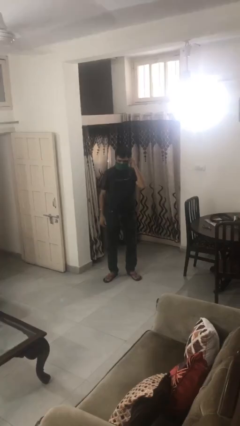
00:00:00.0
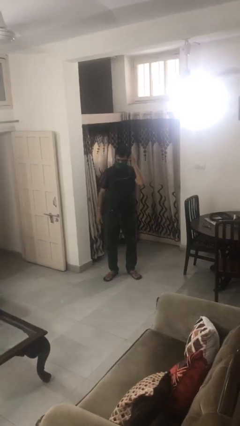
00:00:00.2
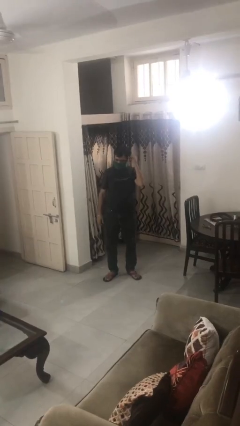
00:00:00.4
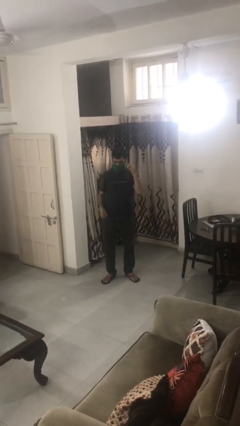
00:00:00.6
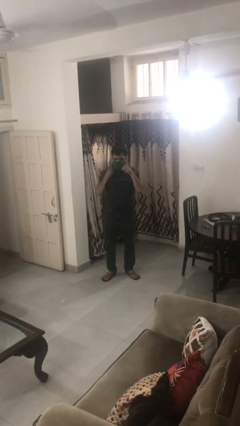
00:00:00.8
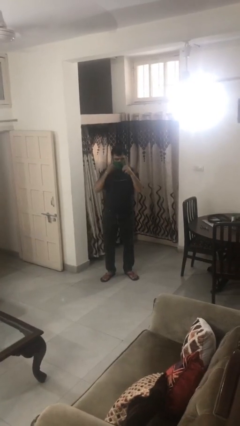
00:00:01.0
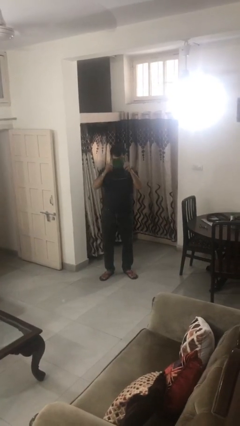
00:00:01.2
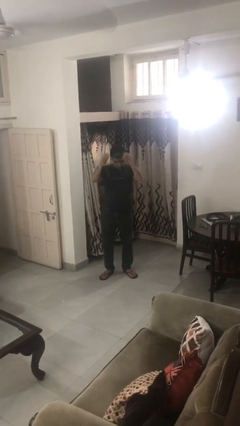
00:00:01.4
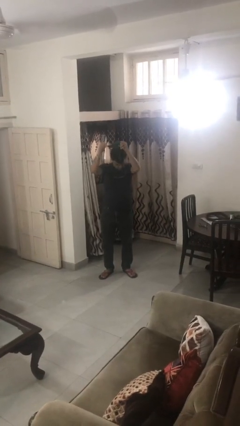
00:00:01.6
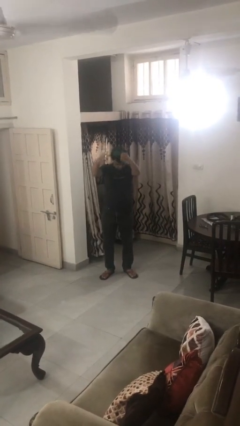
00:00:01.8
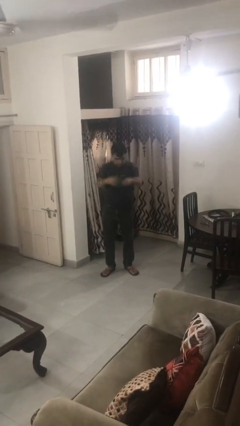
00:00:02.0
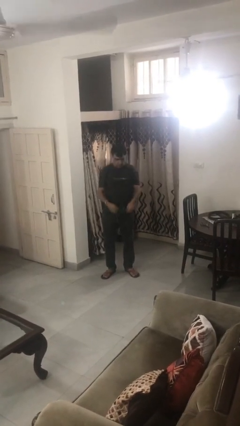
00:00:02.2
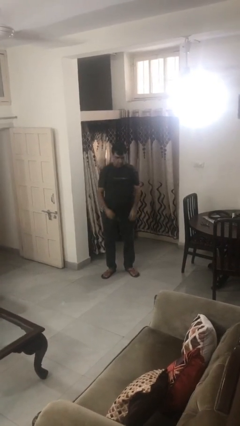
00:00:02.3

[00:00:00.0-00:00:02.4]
person takes off facemask

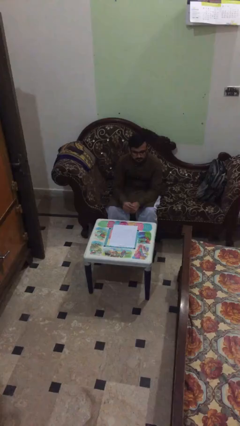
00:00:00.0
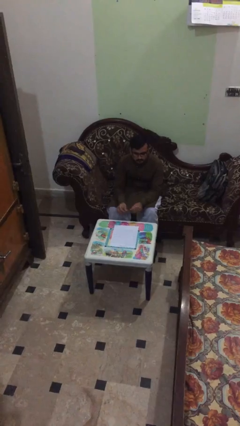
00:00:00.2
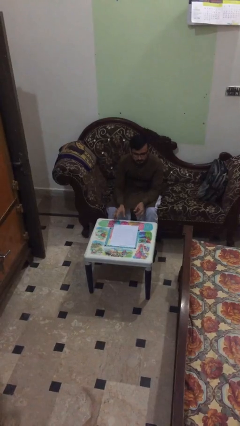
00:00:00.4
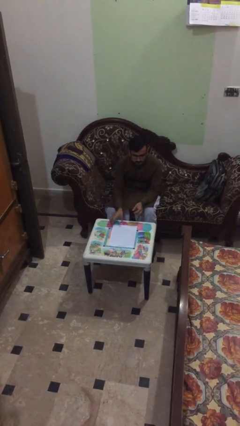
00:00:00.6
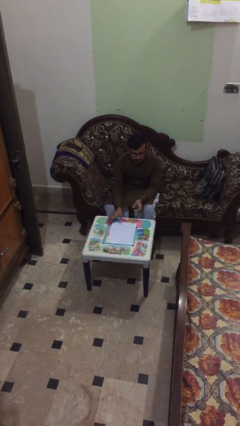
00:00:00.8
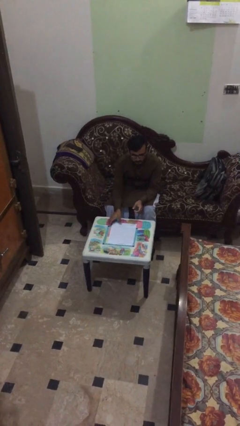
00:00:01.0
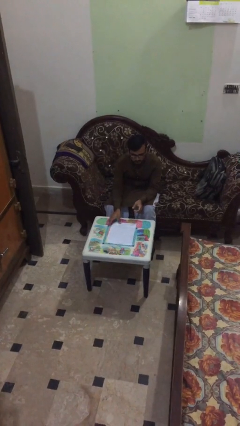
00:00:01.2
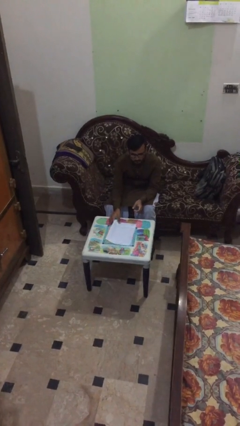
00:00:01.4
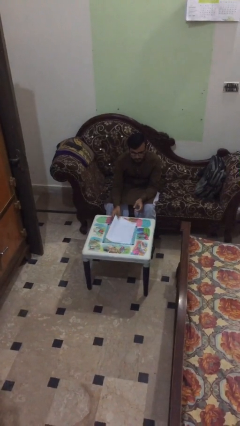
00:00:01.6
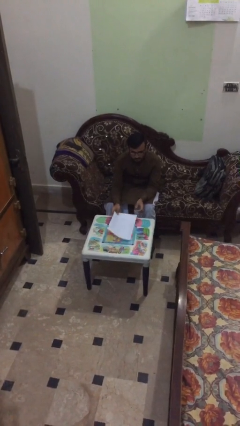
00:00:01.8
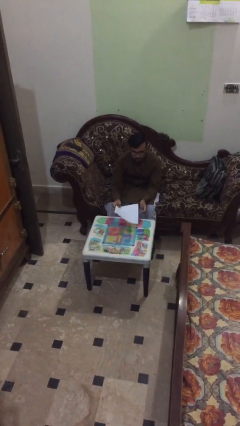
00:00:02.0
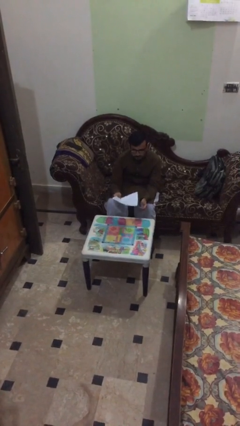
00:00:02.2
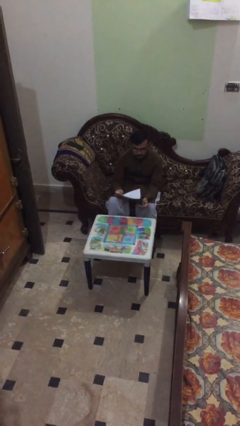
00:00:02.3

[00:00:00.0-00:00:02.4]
person picks up object from table

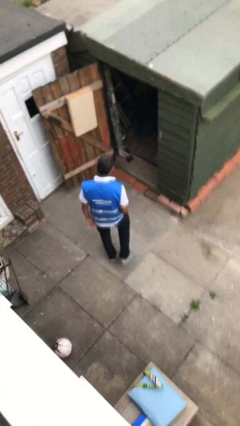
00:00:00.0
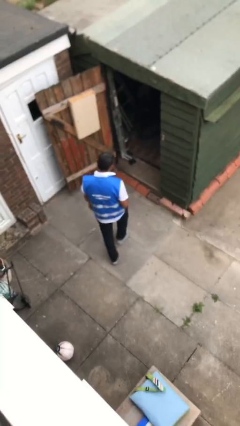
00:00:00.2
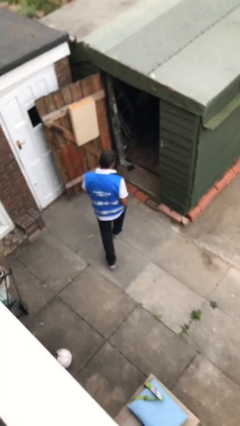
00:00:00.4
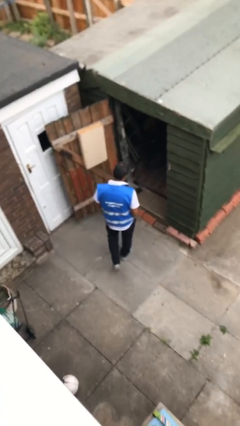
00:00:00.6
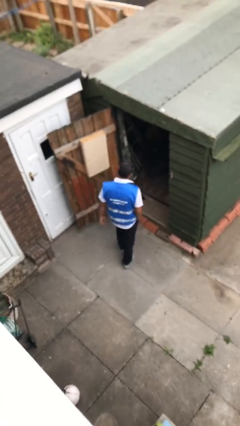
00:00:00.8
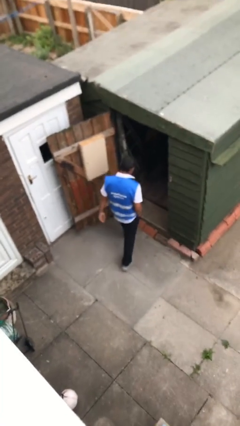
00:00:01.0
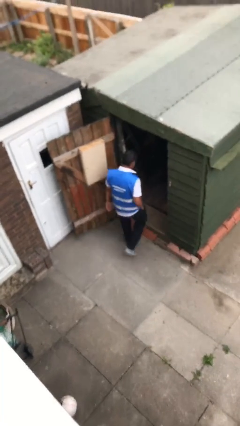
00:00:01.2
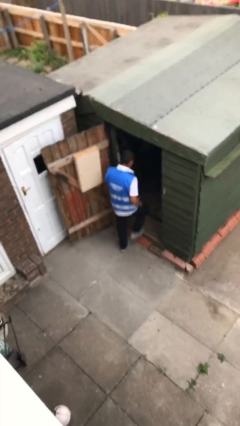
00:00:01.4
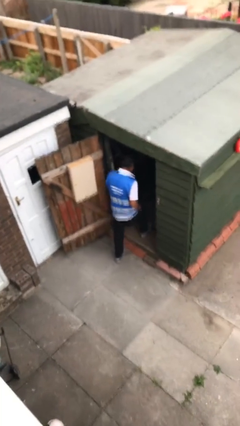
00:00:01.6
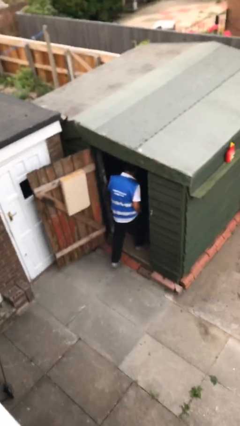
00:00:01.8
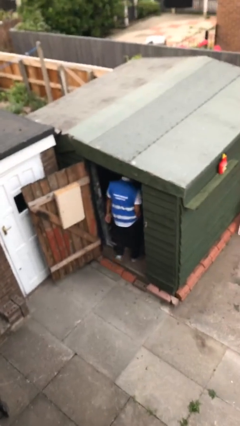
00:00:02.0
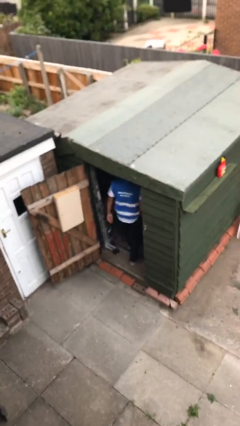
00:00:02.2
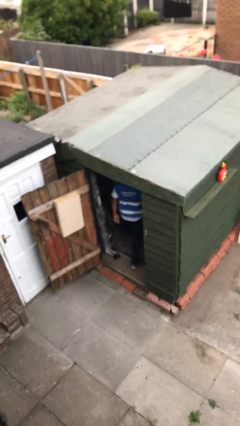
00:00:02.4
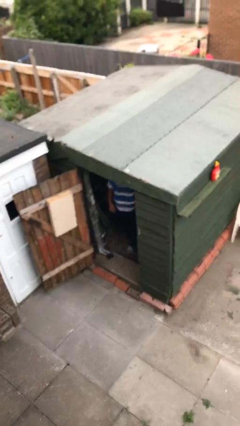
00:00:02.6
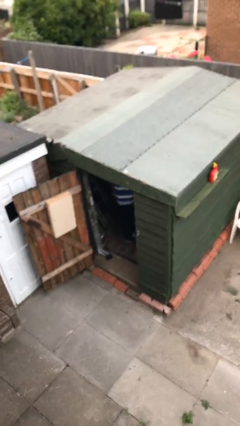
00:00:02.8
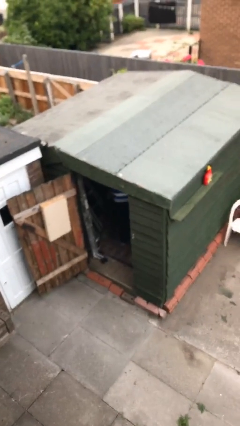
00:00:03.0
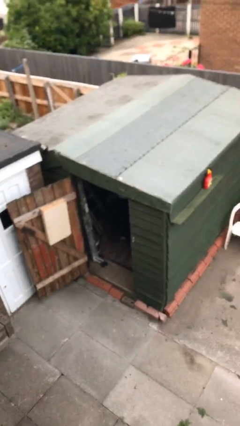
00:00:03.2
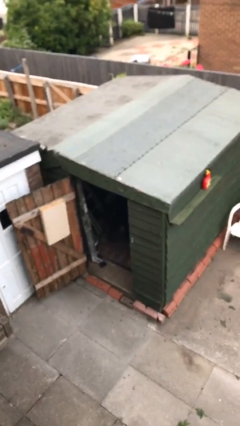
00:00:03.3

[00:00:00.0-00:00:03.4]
person exits scene through structure

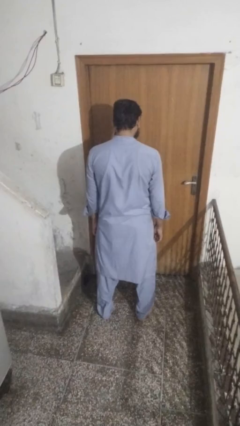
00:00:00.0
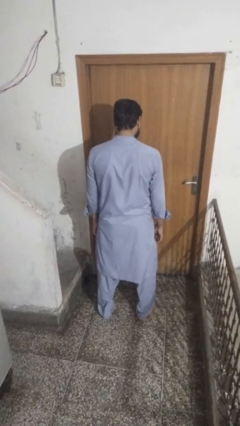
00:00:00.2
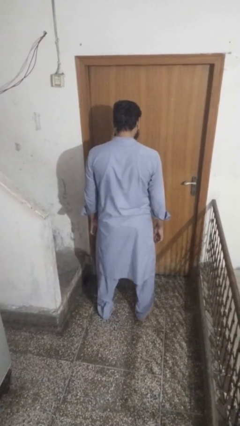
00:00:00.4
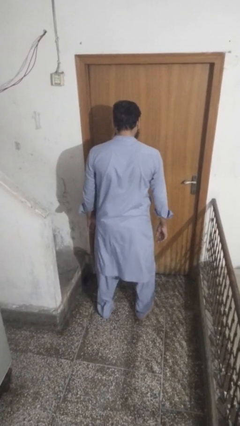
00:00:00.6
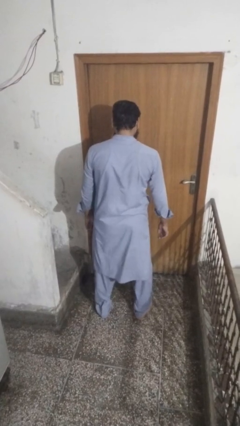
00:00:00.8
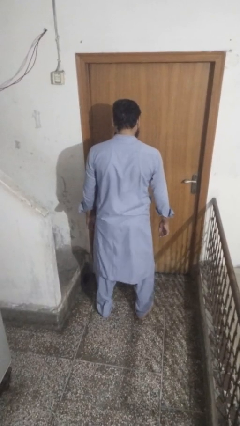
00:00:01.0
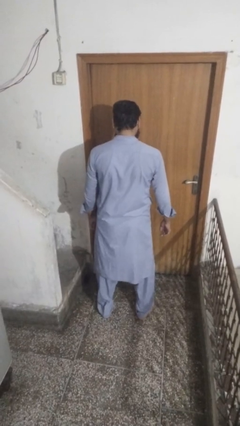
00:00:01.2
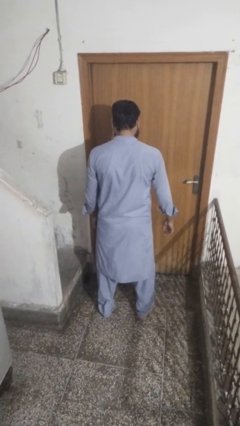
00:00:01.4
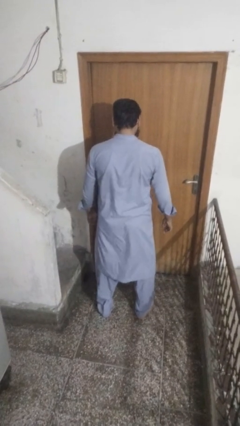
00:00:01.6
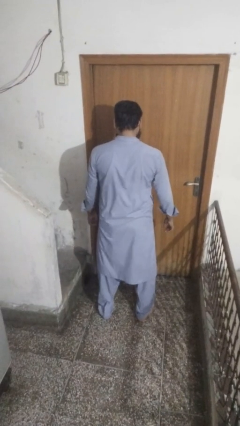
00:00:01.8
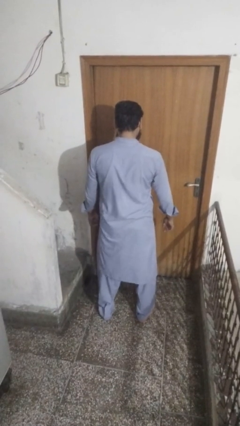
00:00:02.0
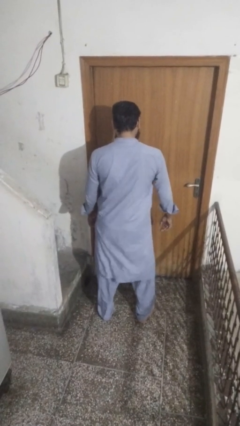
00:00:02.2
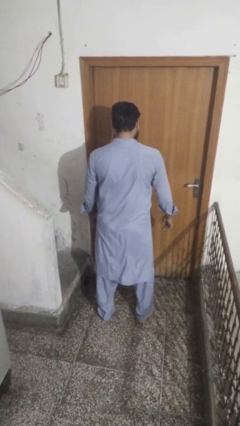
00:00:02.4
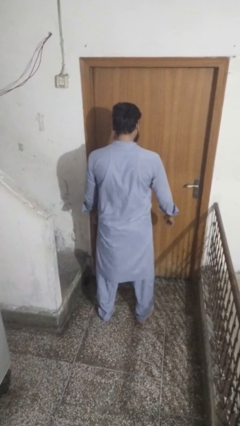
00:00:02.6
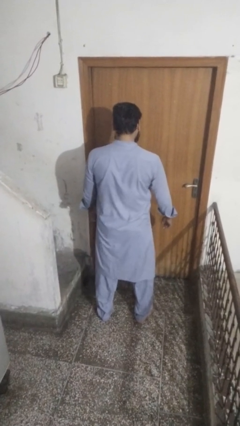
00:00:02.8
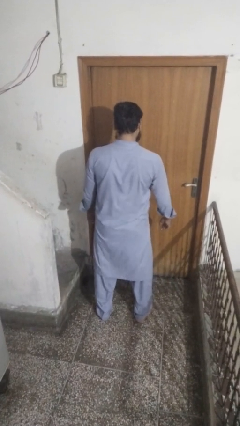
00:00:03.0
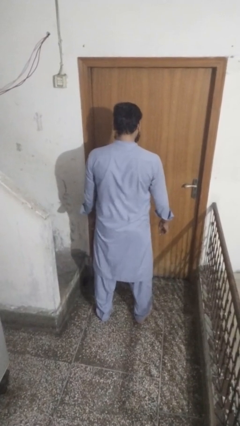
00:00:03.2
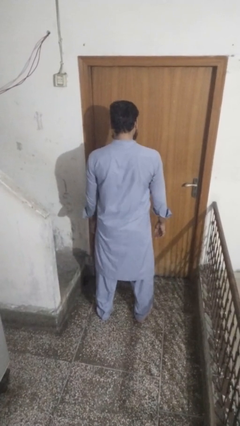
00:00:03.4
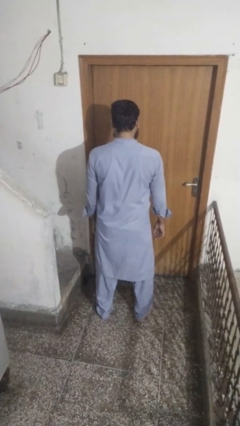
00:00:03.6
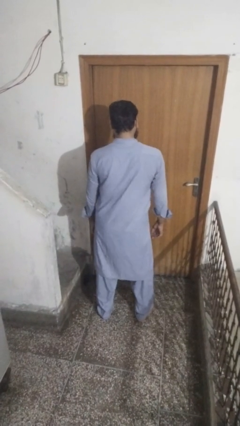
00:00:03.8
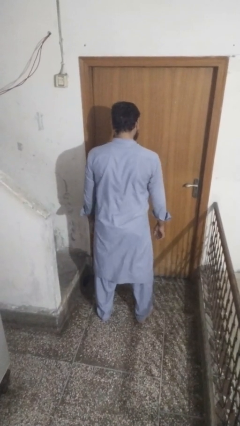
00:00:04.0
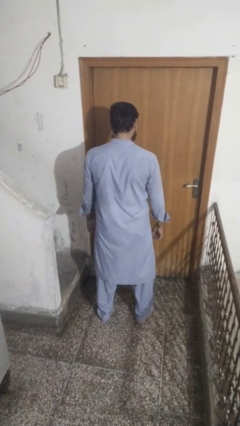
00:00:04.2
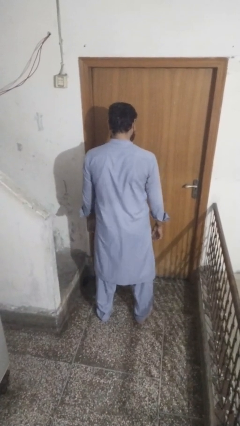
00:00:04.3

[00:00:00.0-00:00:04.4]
person wiggles hips

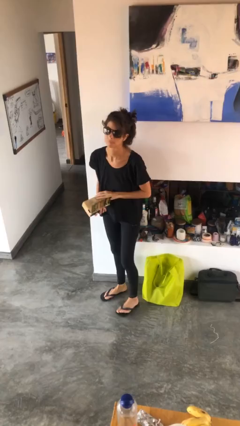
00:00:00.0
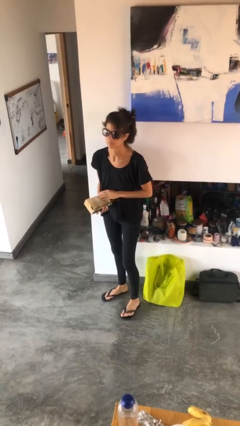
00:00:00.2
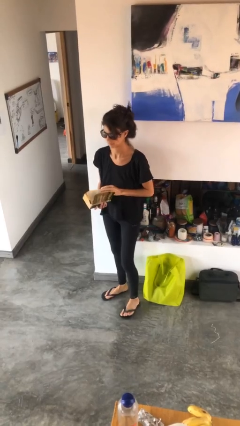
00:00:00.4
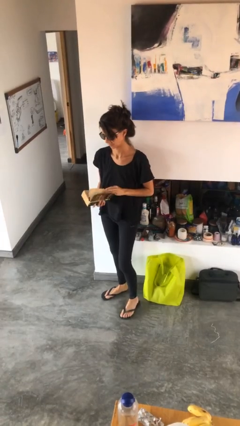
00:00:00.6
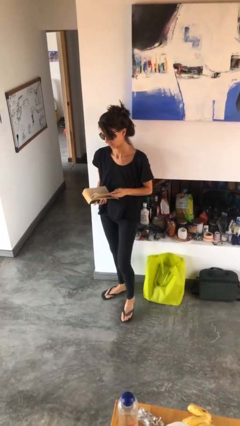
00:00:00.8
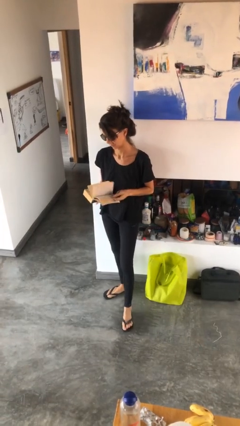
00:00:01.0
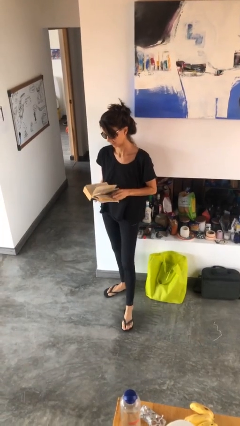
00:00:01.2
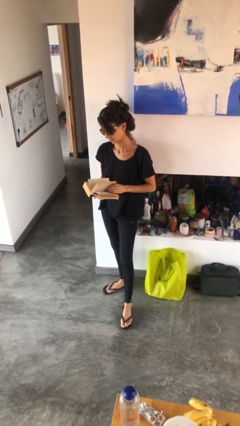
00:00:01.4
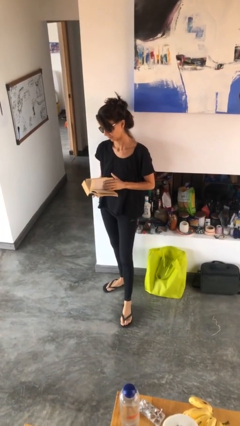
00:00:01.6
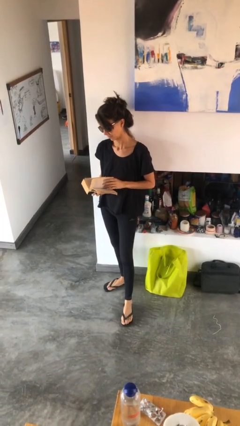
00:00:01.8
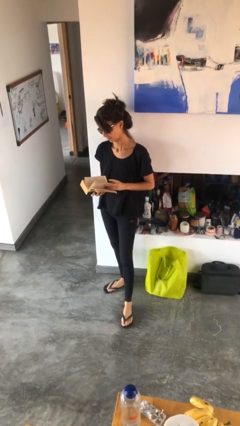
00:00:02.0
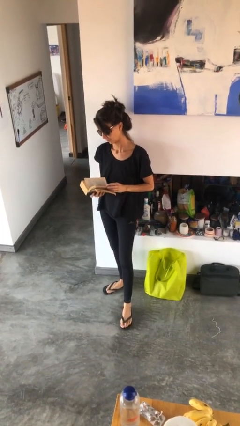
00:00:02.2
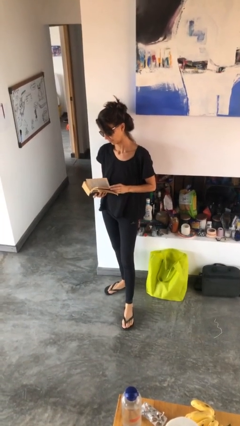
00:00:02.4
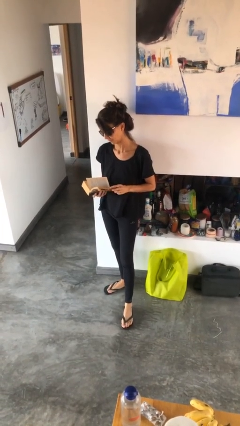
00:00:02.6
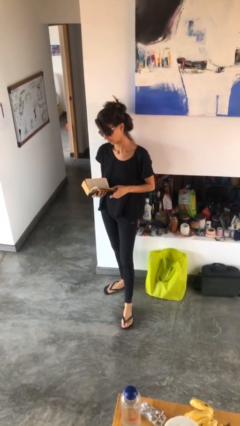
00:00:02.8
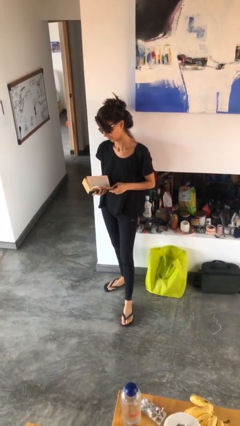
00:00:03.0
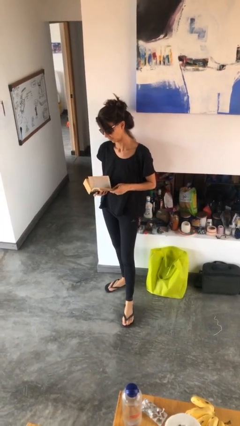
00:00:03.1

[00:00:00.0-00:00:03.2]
person reads book

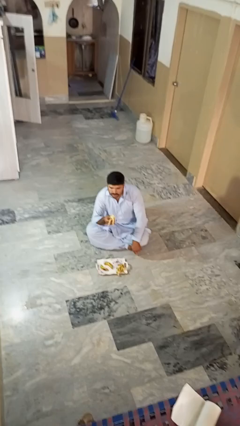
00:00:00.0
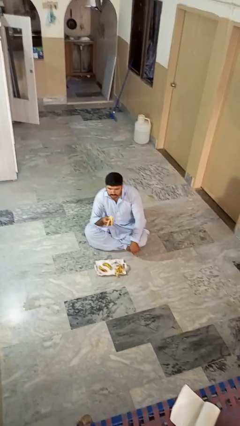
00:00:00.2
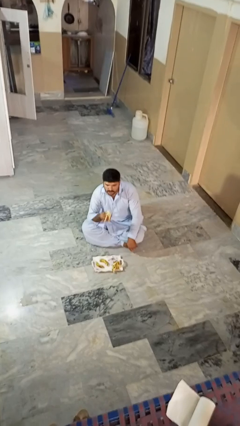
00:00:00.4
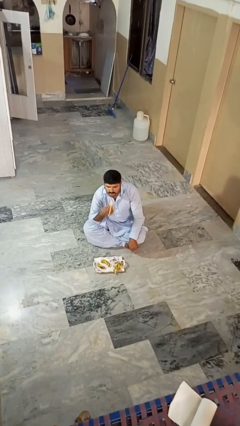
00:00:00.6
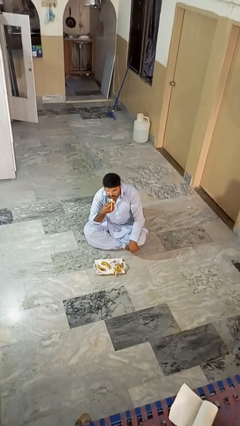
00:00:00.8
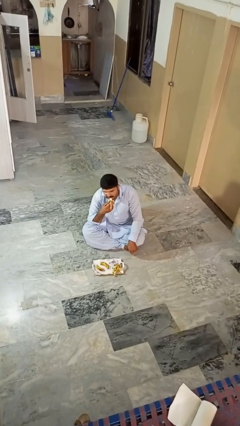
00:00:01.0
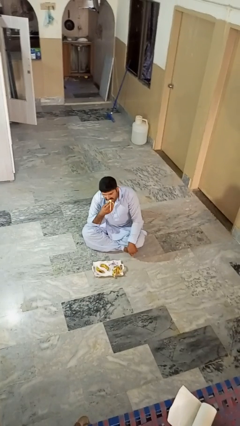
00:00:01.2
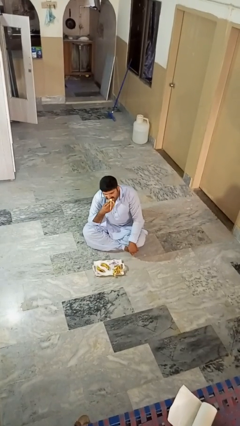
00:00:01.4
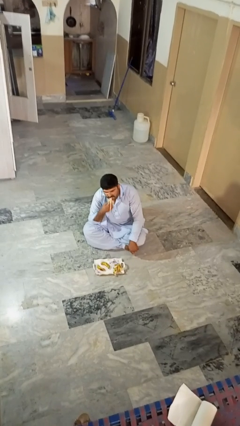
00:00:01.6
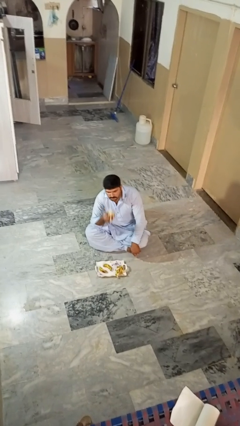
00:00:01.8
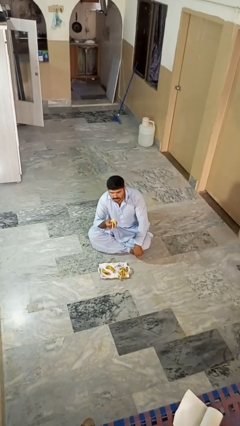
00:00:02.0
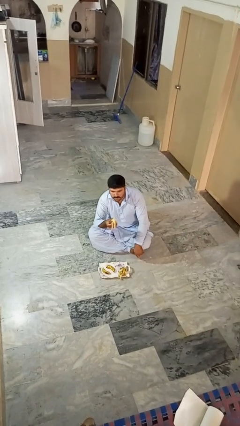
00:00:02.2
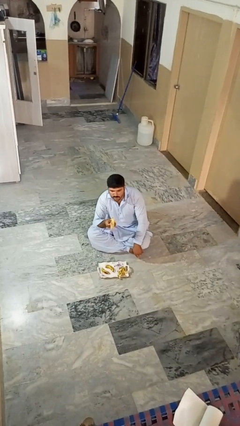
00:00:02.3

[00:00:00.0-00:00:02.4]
person eats banana
